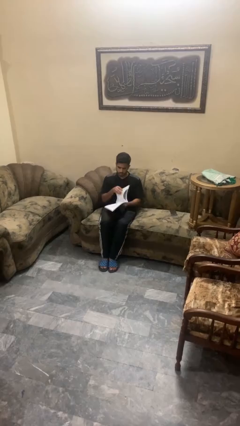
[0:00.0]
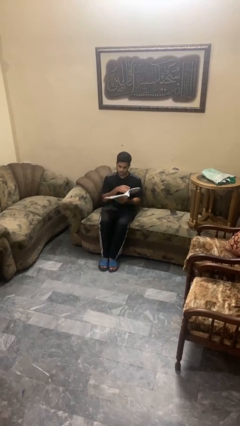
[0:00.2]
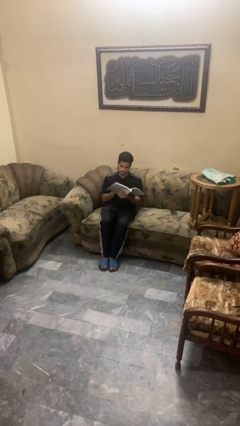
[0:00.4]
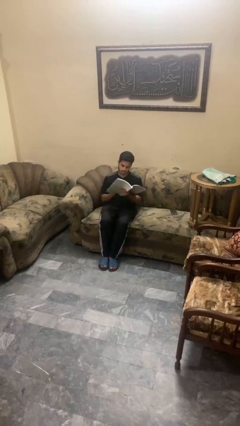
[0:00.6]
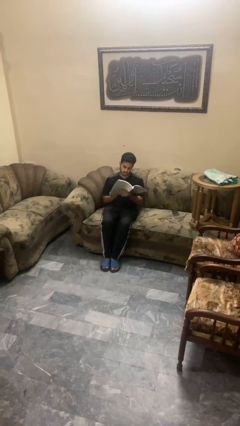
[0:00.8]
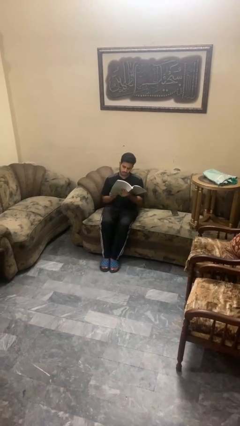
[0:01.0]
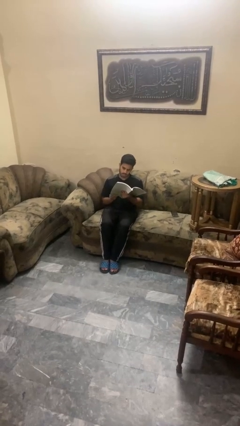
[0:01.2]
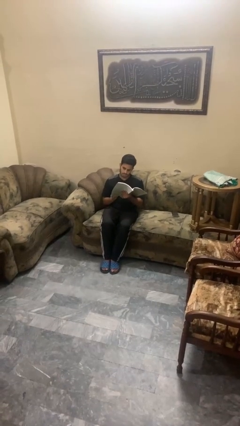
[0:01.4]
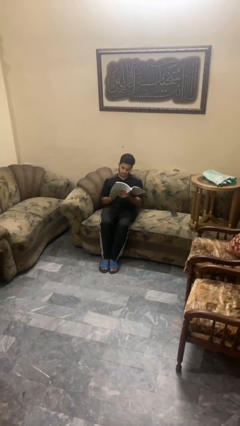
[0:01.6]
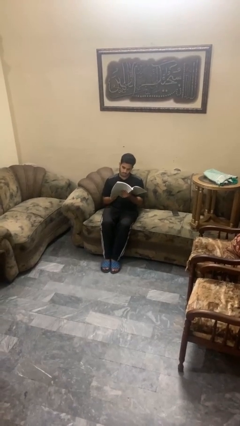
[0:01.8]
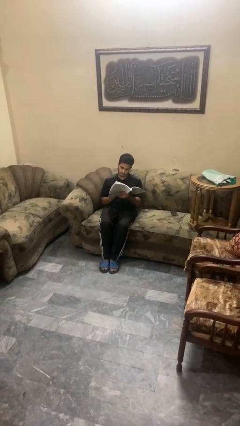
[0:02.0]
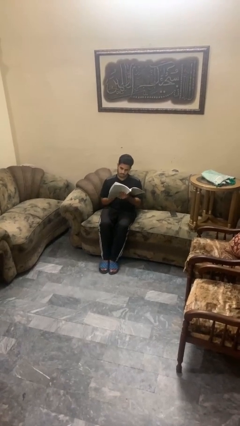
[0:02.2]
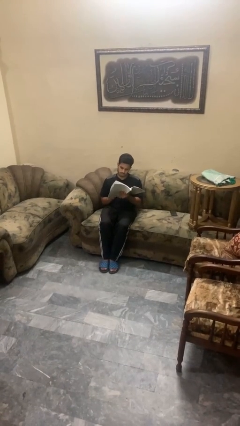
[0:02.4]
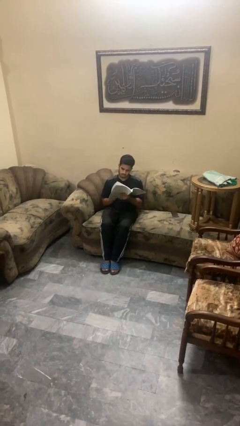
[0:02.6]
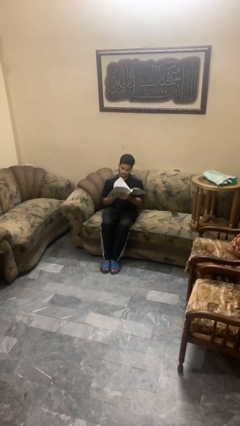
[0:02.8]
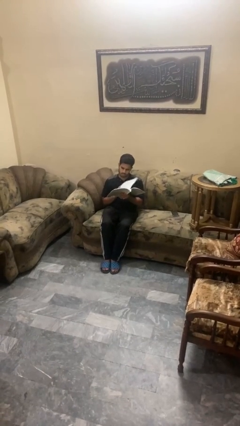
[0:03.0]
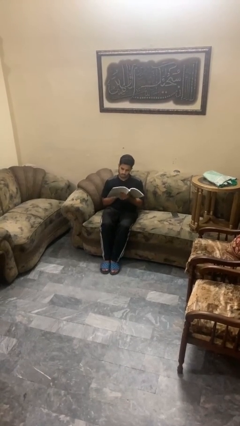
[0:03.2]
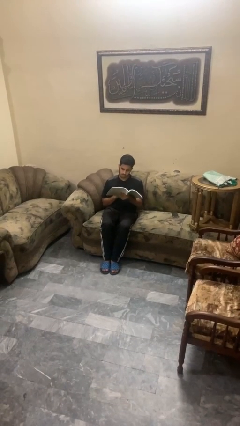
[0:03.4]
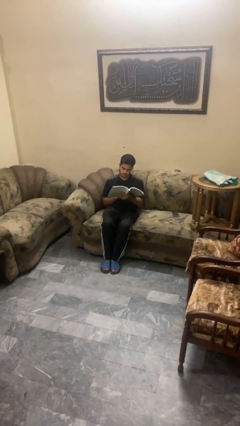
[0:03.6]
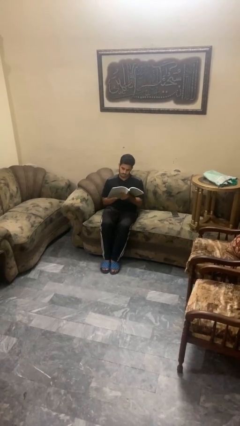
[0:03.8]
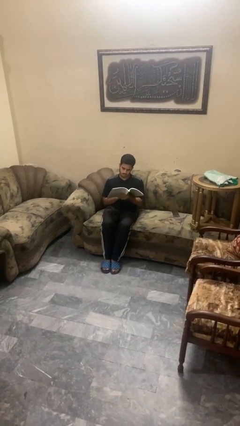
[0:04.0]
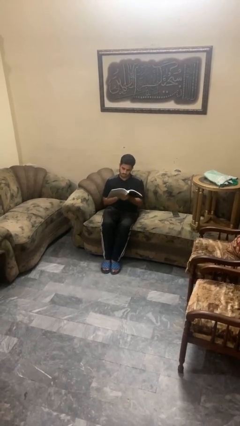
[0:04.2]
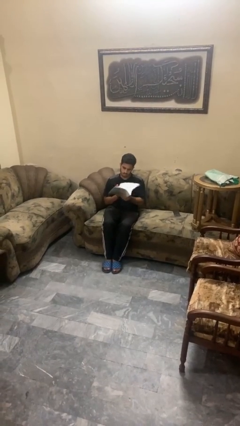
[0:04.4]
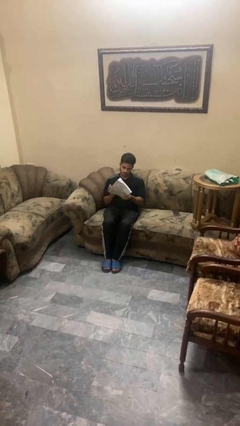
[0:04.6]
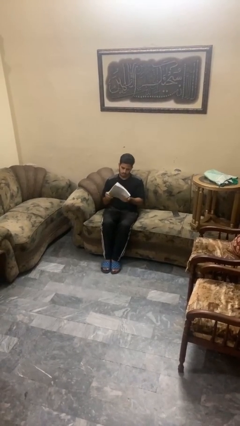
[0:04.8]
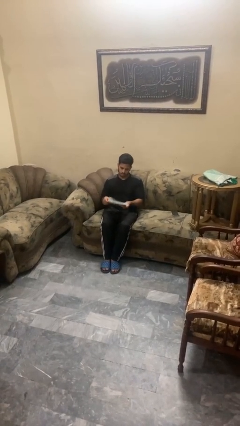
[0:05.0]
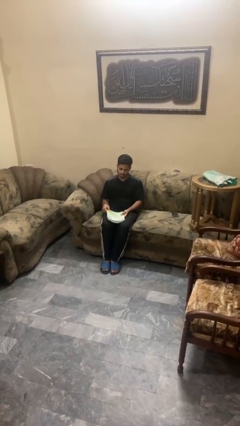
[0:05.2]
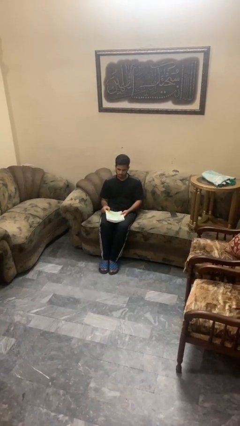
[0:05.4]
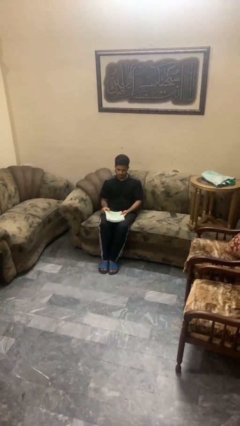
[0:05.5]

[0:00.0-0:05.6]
person reads book

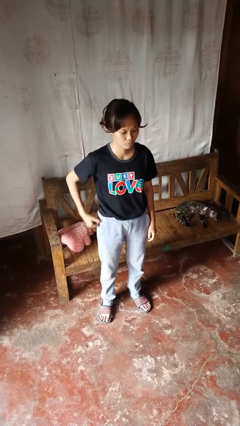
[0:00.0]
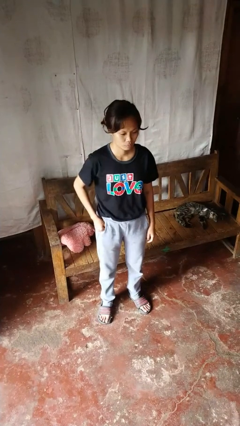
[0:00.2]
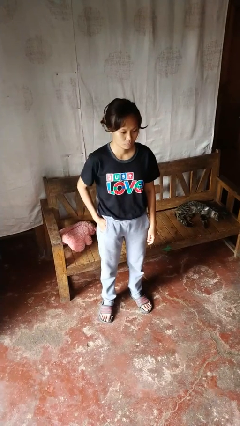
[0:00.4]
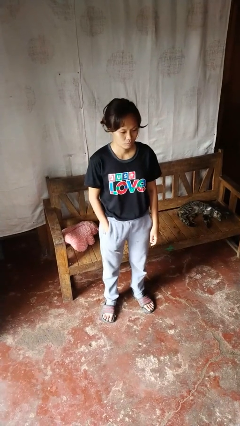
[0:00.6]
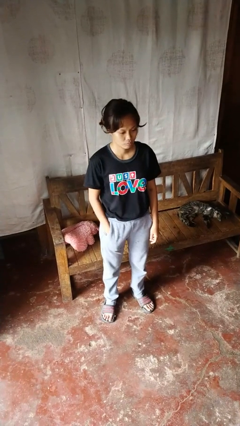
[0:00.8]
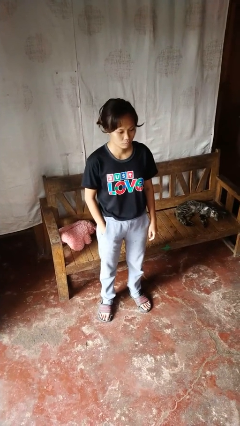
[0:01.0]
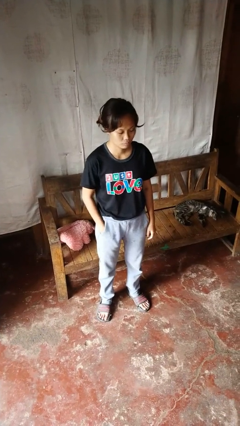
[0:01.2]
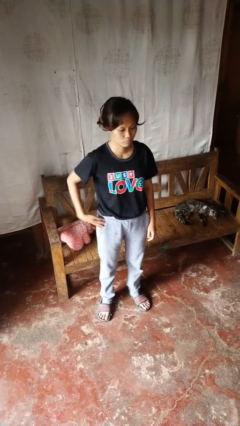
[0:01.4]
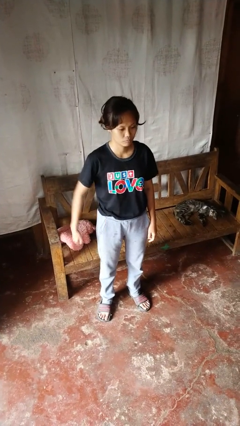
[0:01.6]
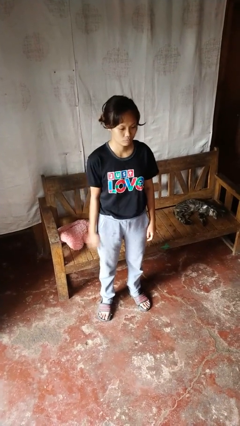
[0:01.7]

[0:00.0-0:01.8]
person puts hands in back pockets

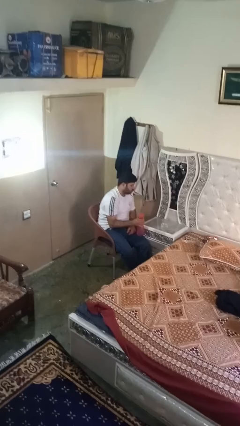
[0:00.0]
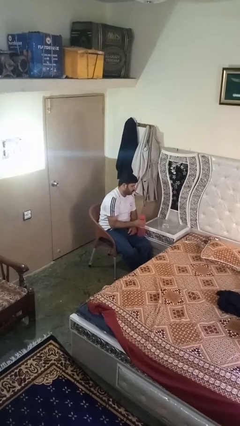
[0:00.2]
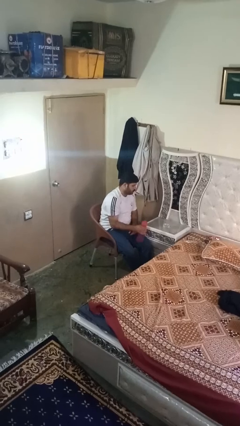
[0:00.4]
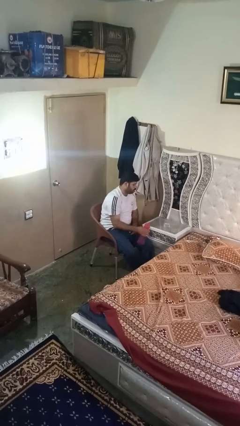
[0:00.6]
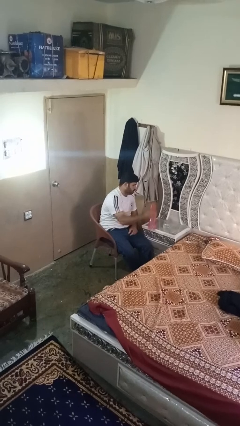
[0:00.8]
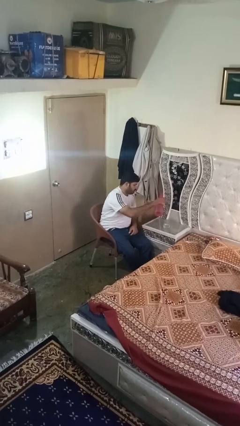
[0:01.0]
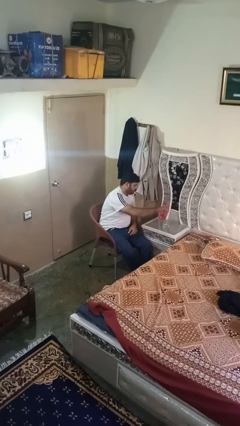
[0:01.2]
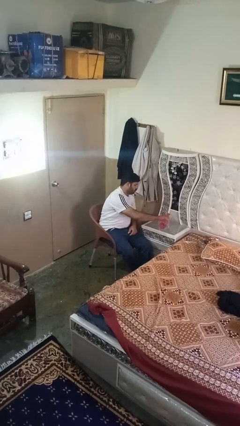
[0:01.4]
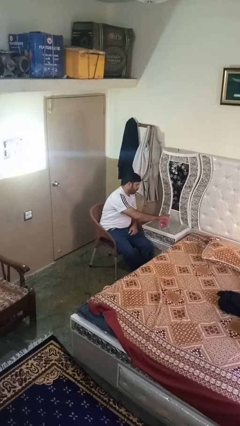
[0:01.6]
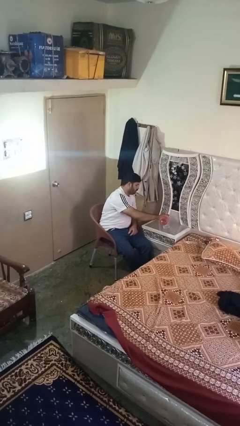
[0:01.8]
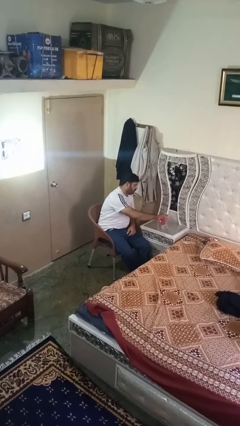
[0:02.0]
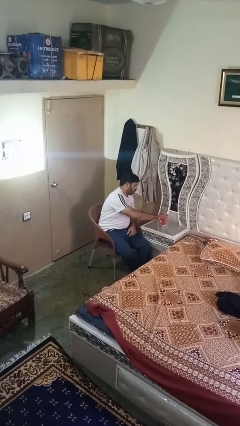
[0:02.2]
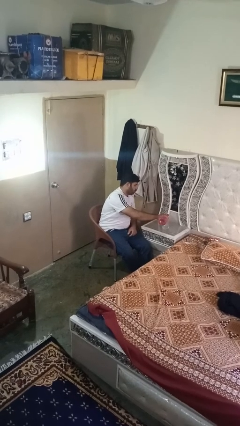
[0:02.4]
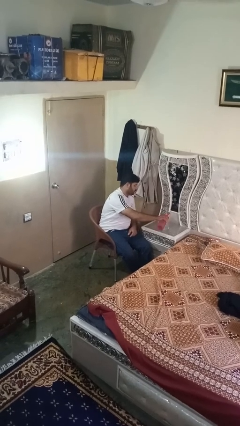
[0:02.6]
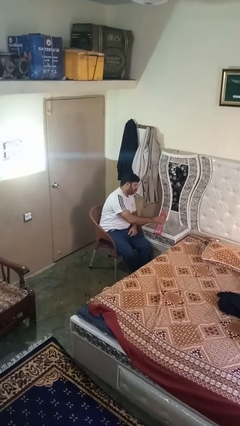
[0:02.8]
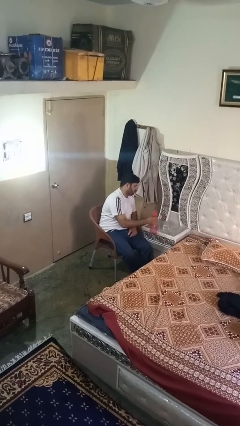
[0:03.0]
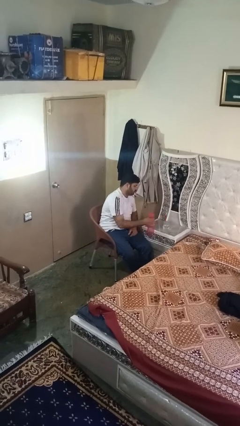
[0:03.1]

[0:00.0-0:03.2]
person pours liquid into cup

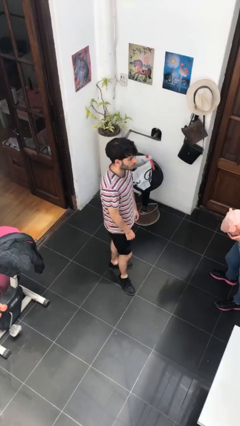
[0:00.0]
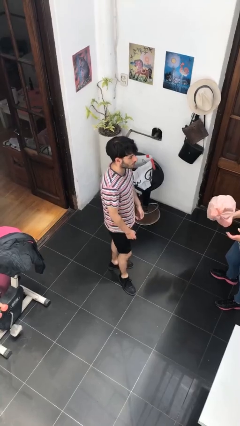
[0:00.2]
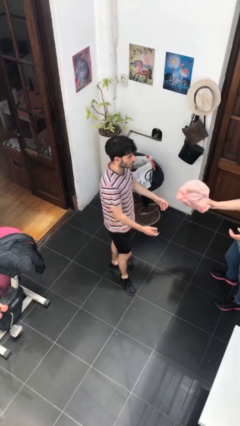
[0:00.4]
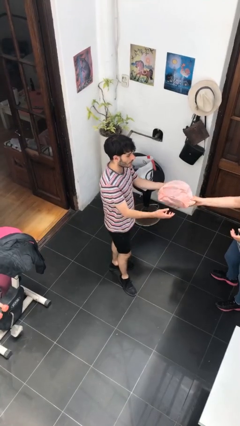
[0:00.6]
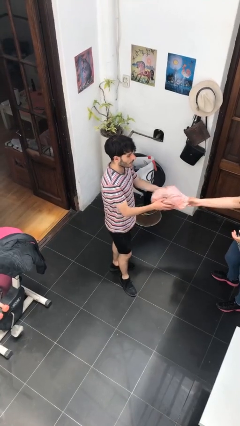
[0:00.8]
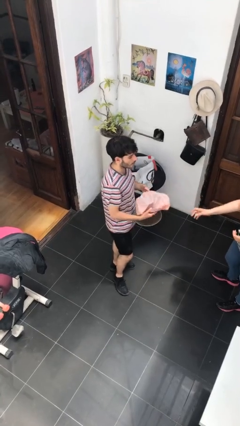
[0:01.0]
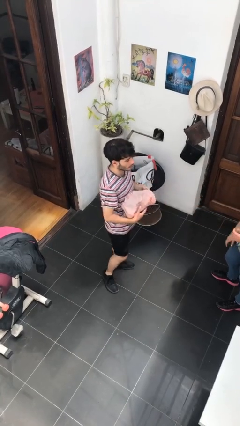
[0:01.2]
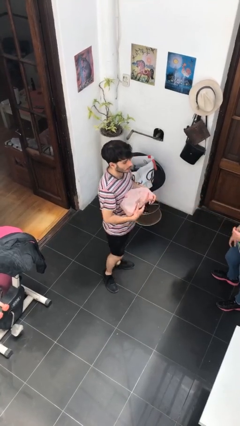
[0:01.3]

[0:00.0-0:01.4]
person transfers object to person

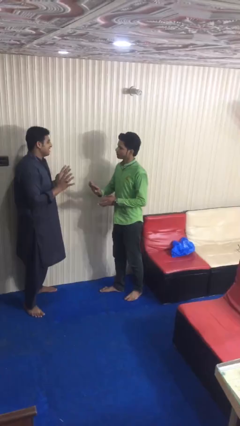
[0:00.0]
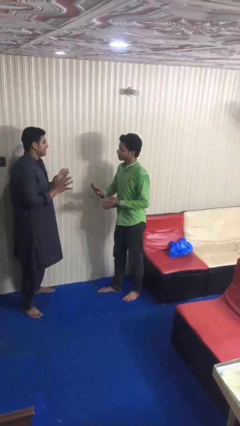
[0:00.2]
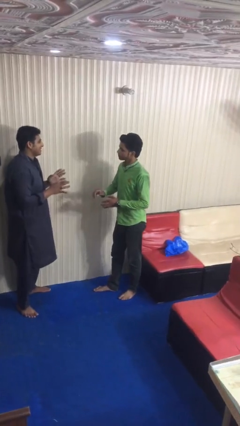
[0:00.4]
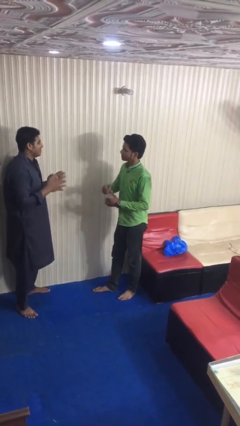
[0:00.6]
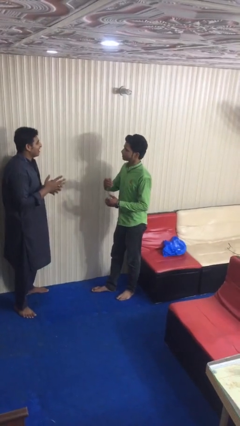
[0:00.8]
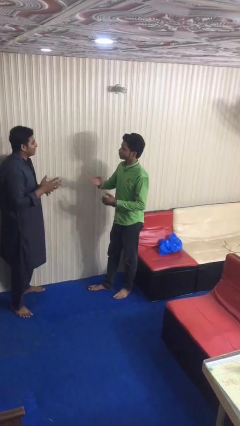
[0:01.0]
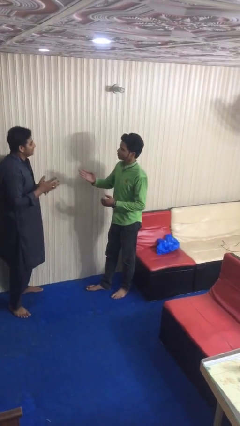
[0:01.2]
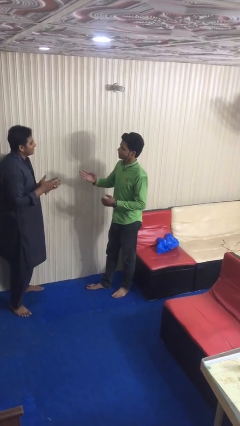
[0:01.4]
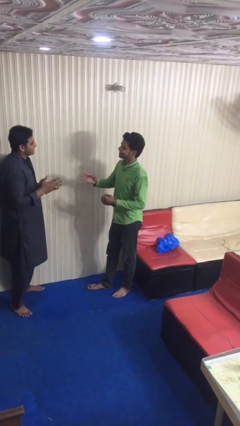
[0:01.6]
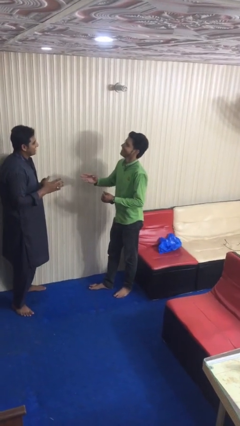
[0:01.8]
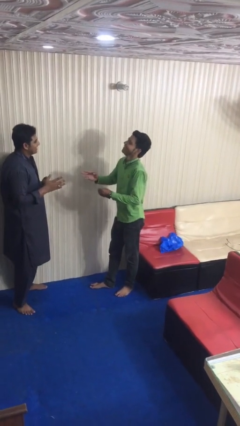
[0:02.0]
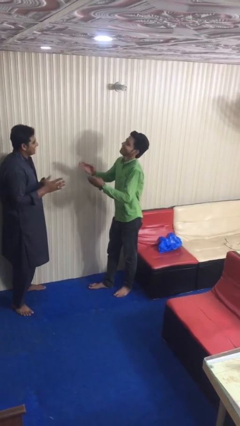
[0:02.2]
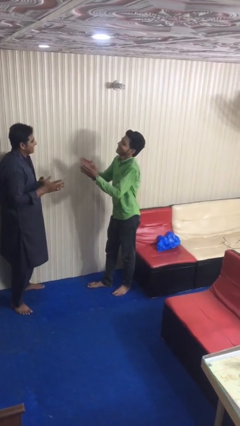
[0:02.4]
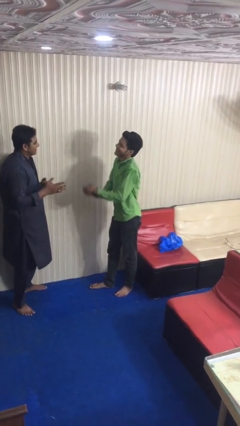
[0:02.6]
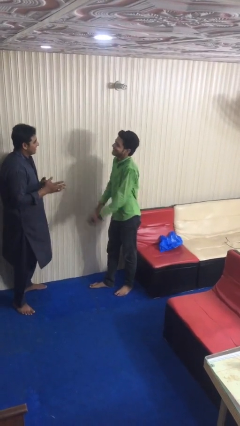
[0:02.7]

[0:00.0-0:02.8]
person talks to person

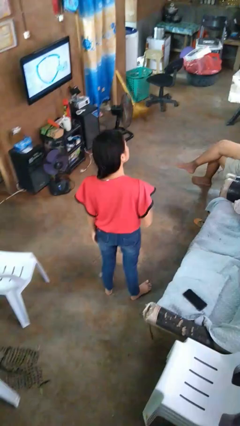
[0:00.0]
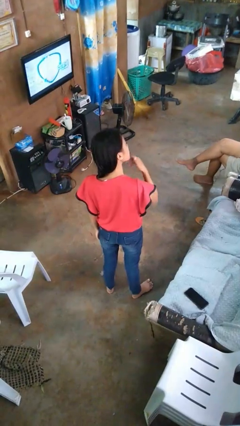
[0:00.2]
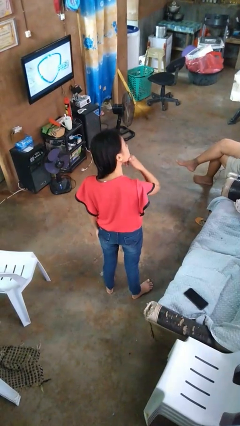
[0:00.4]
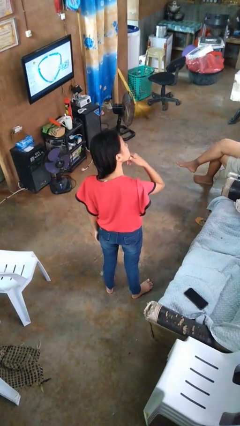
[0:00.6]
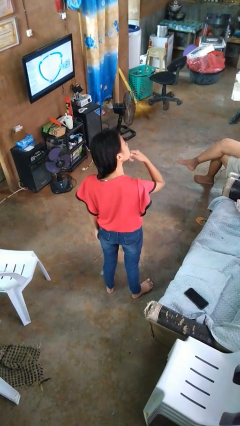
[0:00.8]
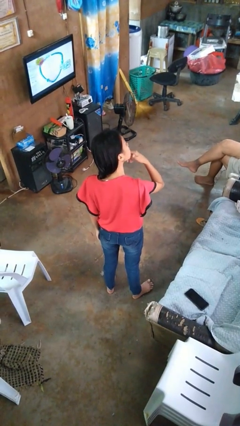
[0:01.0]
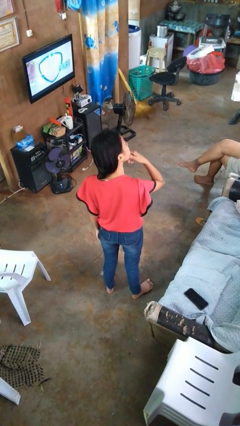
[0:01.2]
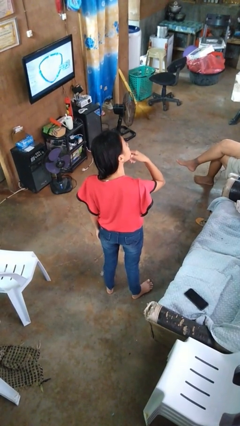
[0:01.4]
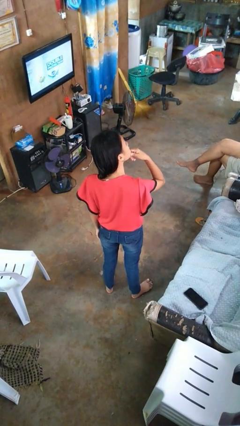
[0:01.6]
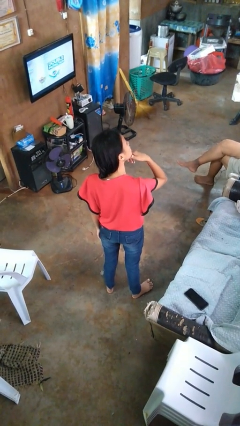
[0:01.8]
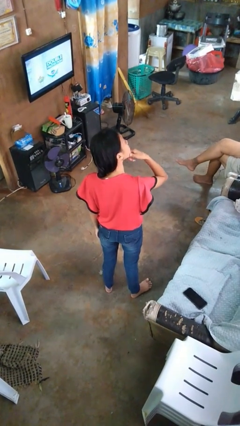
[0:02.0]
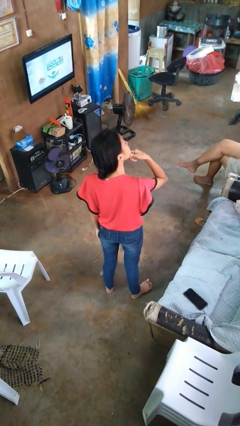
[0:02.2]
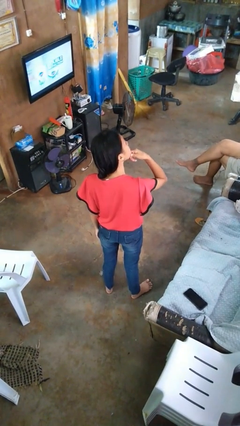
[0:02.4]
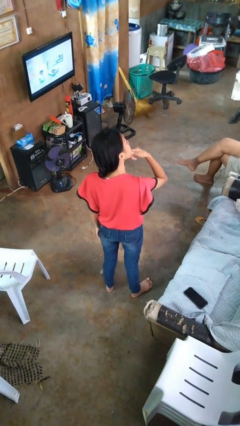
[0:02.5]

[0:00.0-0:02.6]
person strokes chin
